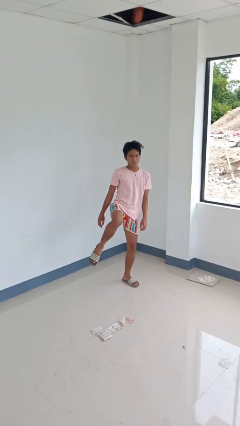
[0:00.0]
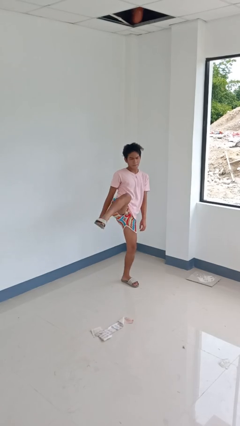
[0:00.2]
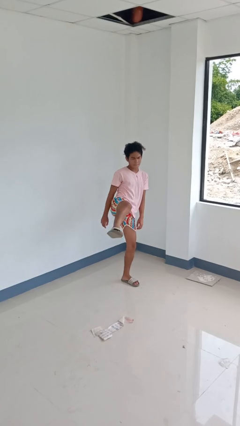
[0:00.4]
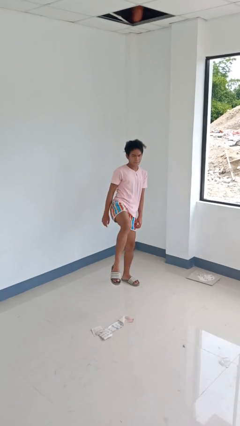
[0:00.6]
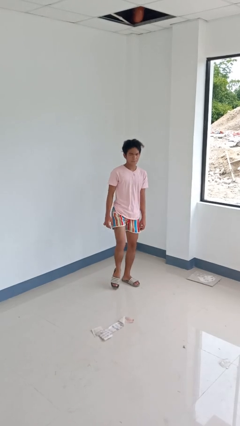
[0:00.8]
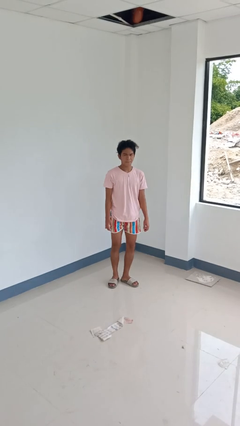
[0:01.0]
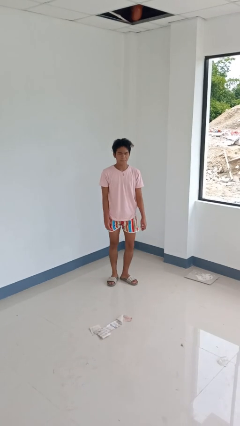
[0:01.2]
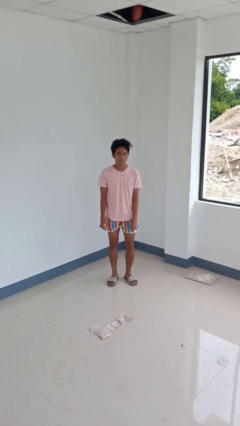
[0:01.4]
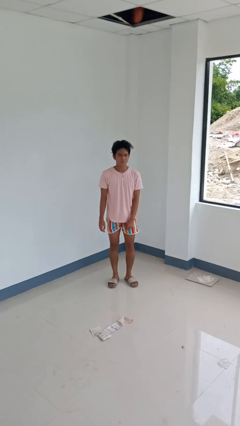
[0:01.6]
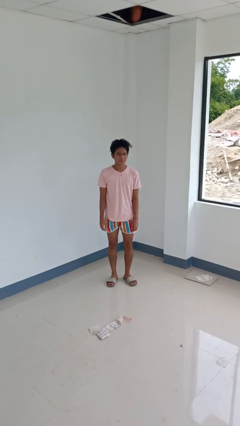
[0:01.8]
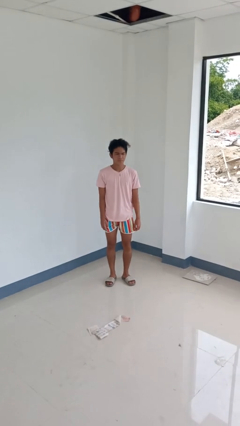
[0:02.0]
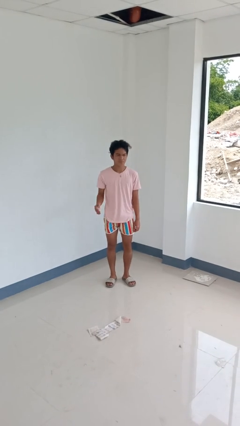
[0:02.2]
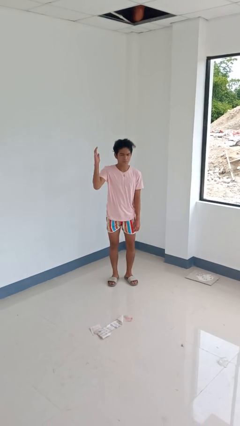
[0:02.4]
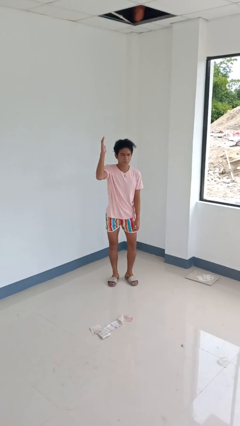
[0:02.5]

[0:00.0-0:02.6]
person karate kicks

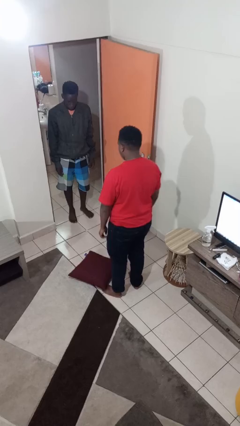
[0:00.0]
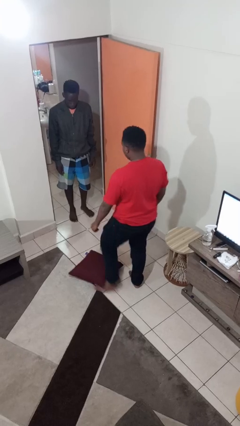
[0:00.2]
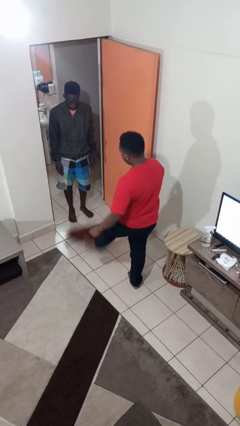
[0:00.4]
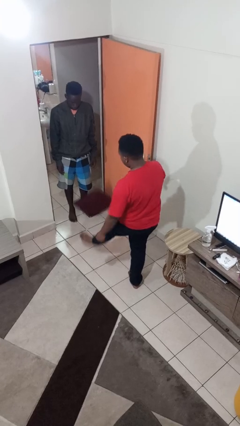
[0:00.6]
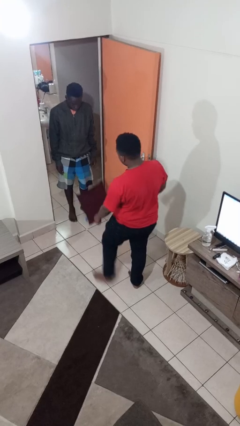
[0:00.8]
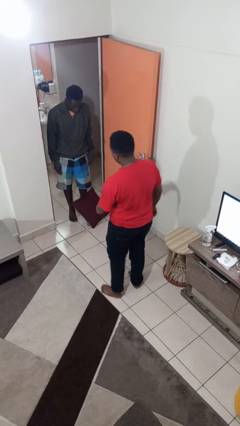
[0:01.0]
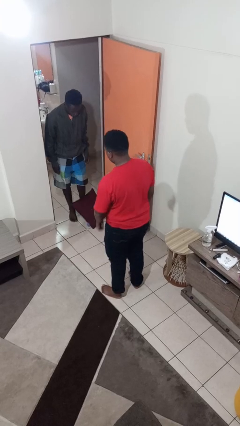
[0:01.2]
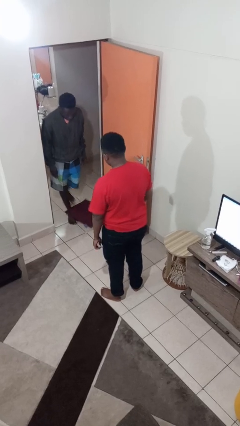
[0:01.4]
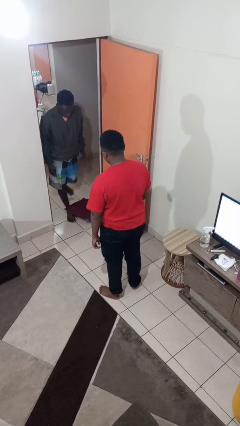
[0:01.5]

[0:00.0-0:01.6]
person kicks object to person

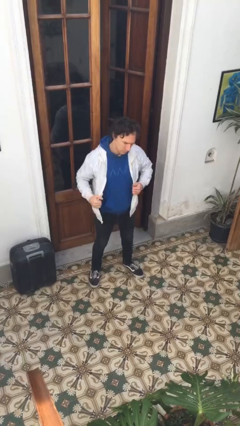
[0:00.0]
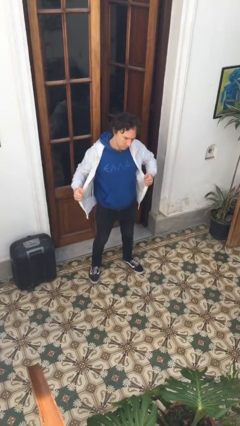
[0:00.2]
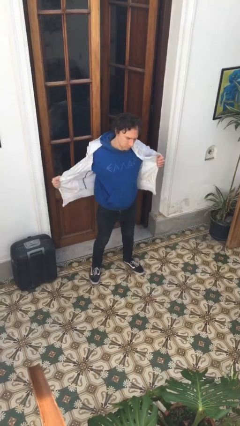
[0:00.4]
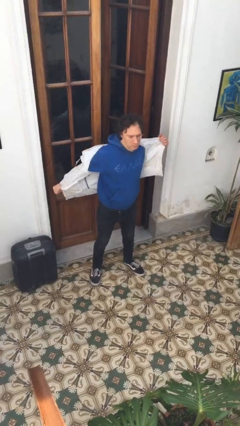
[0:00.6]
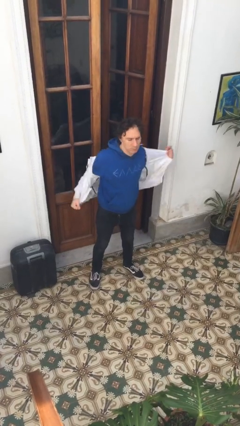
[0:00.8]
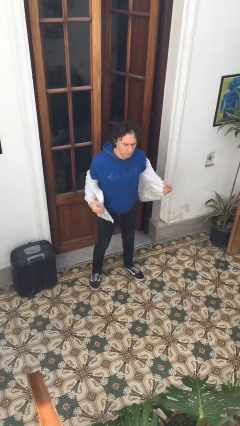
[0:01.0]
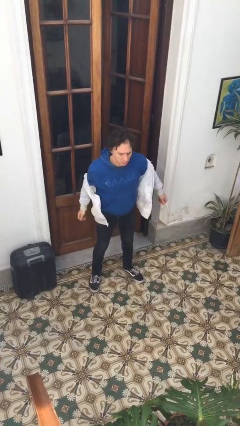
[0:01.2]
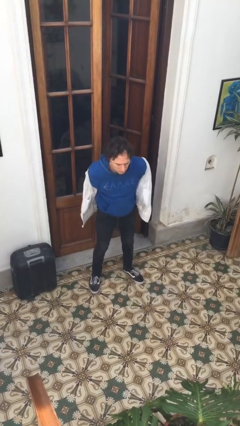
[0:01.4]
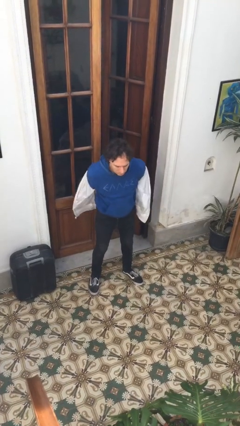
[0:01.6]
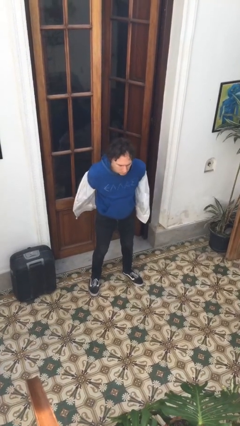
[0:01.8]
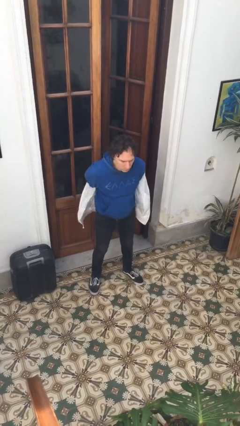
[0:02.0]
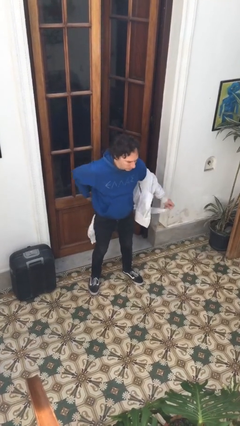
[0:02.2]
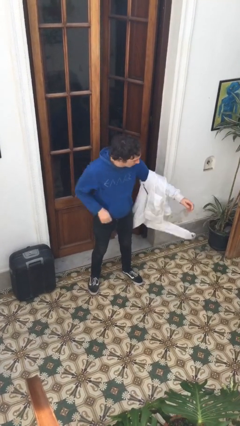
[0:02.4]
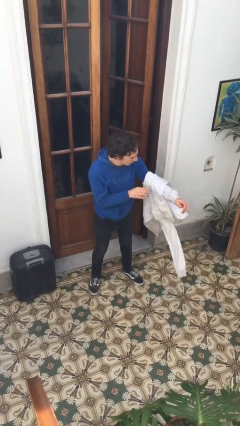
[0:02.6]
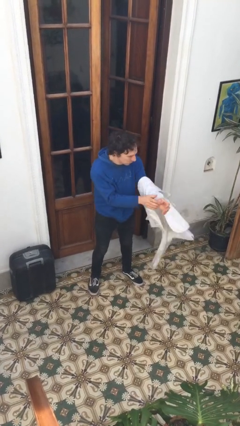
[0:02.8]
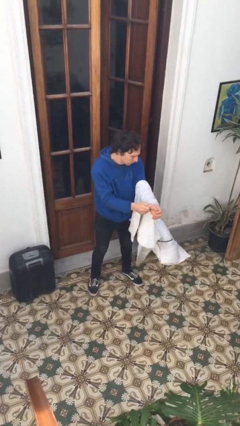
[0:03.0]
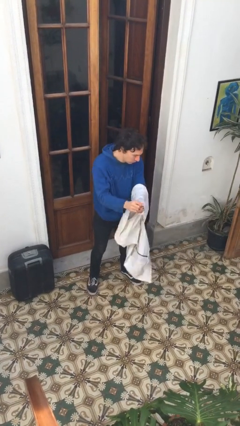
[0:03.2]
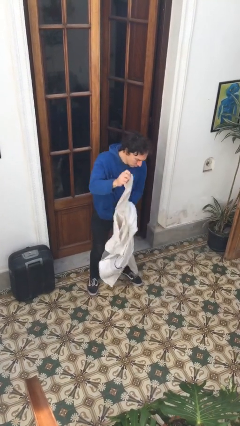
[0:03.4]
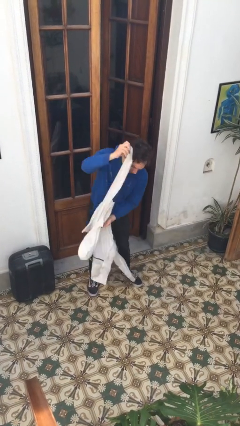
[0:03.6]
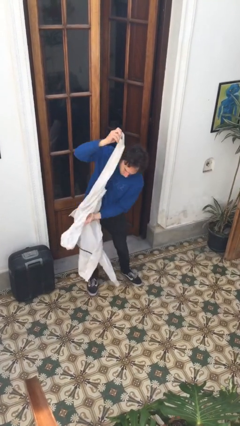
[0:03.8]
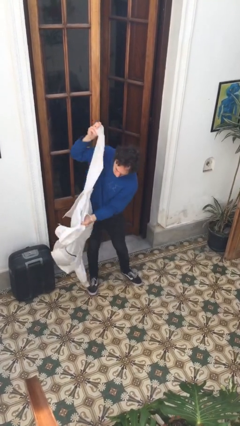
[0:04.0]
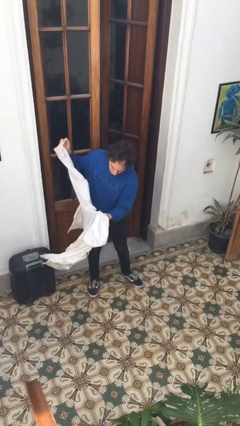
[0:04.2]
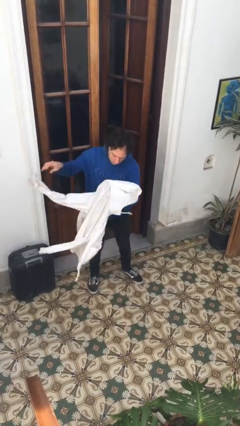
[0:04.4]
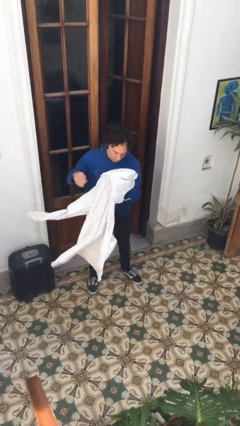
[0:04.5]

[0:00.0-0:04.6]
person takes off jacket

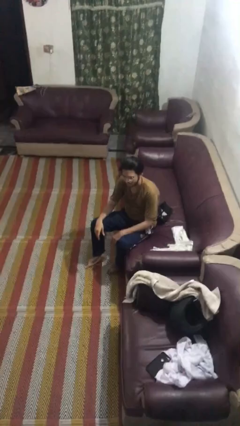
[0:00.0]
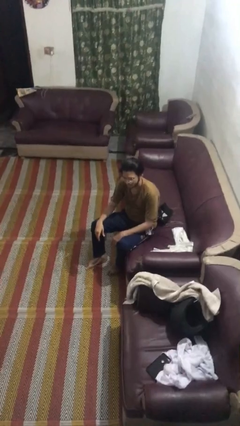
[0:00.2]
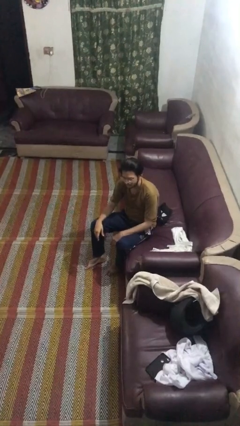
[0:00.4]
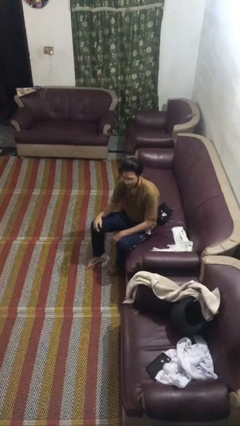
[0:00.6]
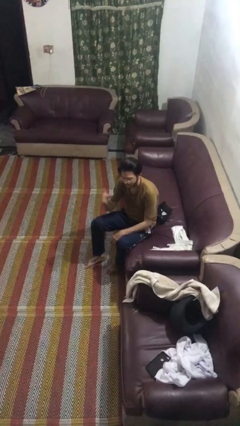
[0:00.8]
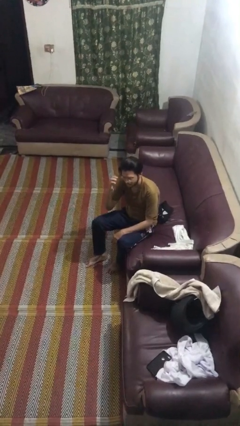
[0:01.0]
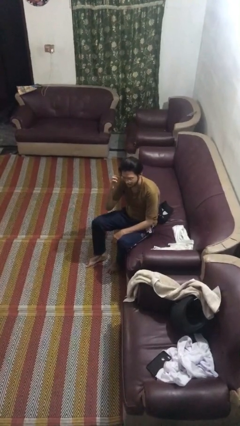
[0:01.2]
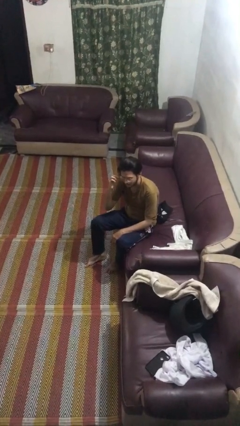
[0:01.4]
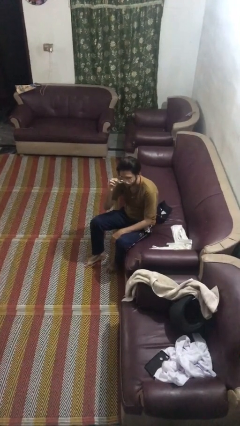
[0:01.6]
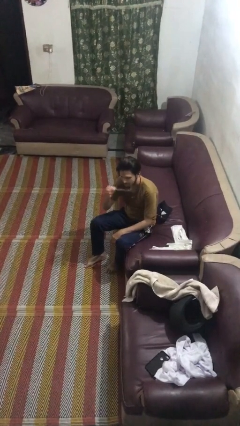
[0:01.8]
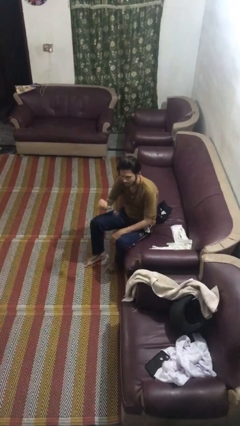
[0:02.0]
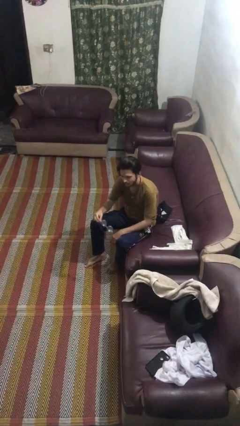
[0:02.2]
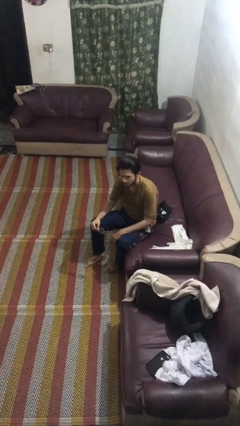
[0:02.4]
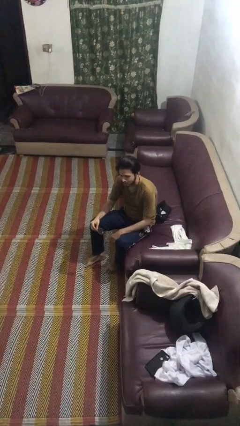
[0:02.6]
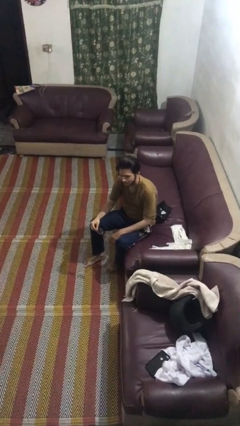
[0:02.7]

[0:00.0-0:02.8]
person takes off glasses

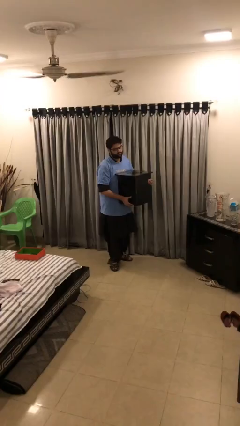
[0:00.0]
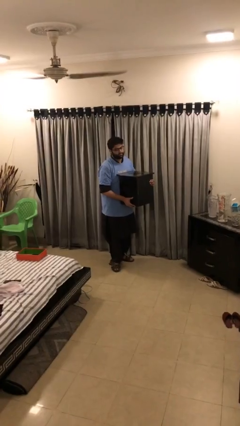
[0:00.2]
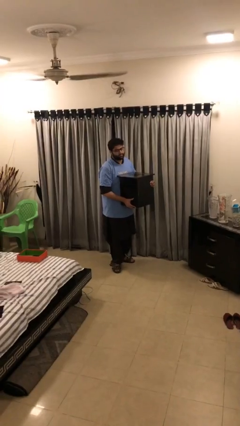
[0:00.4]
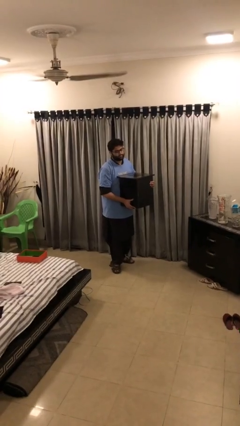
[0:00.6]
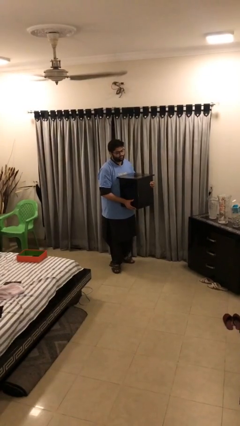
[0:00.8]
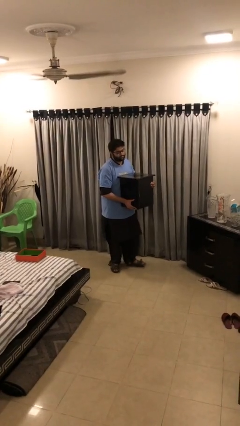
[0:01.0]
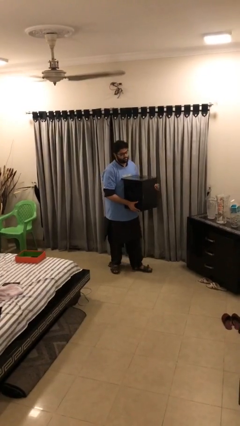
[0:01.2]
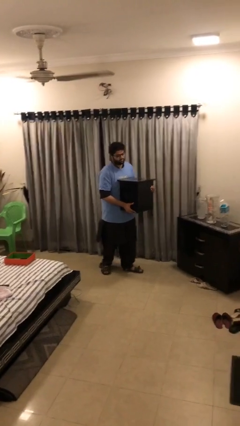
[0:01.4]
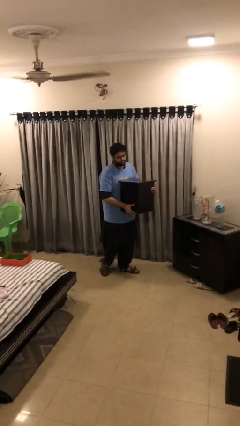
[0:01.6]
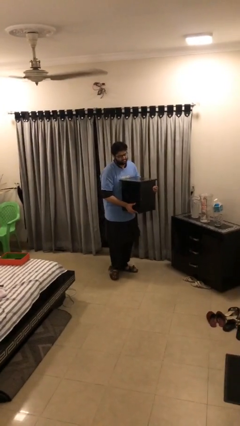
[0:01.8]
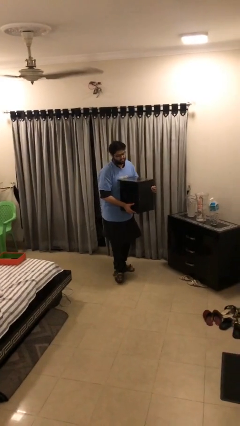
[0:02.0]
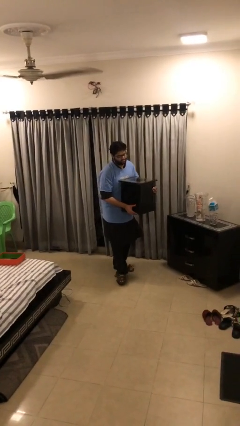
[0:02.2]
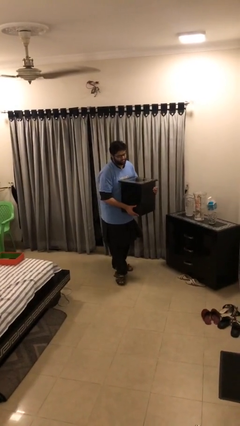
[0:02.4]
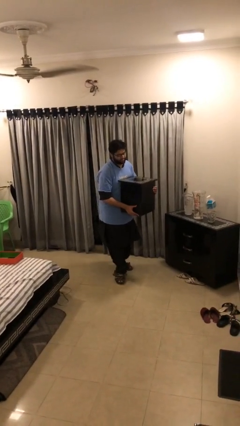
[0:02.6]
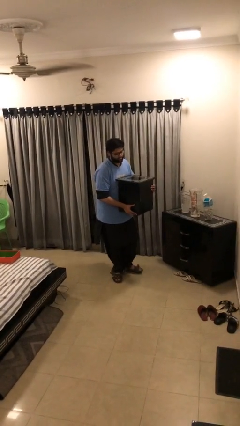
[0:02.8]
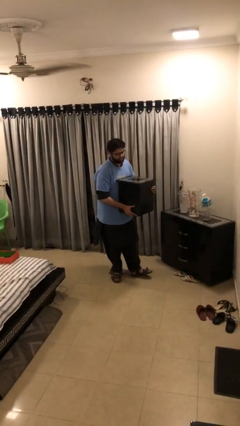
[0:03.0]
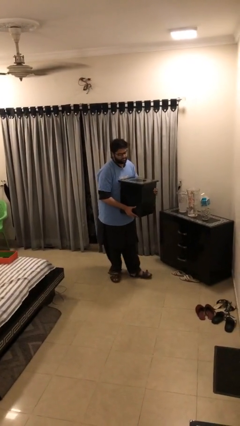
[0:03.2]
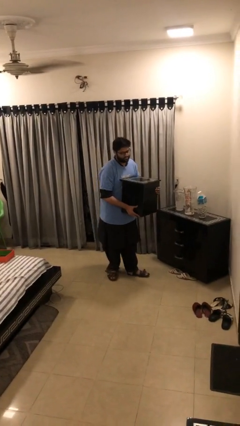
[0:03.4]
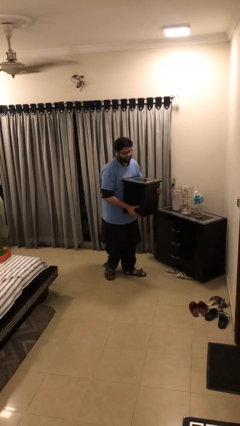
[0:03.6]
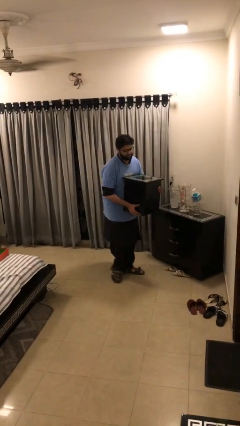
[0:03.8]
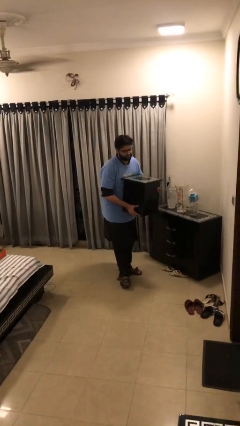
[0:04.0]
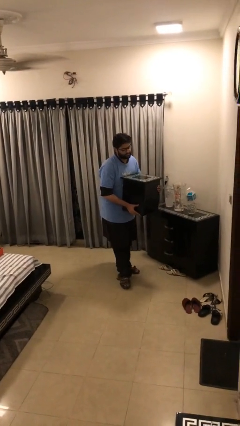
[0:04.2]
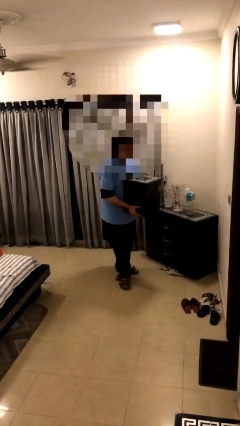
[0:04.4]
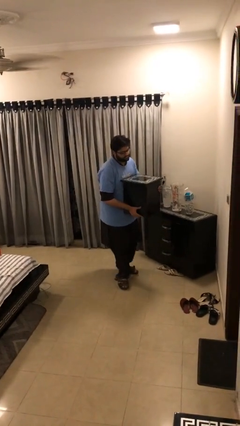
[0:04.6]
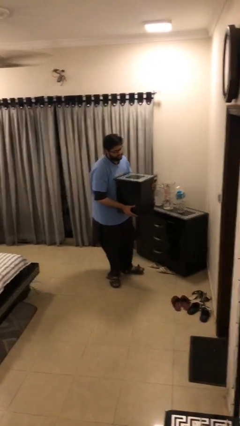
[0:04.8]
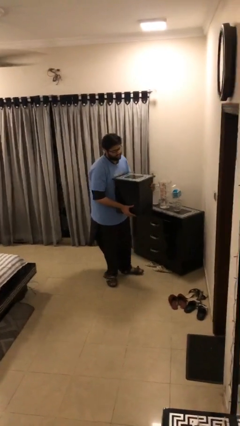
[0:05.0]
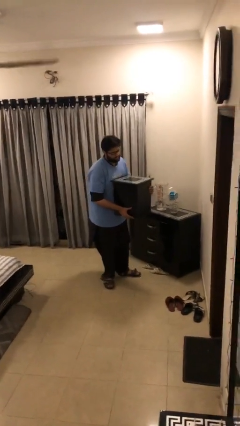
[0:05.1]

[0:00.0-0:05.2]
person carries heavy object

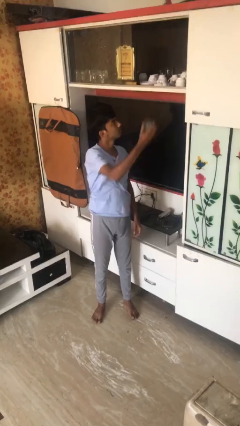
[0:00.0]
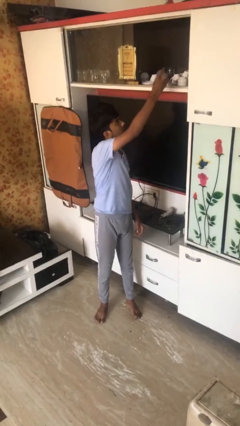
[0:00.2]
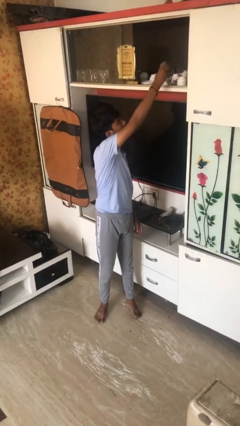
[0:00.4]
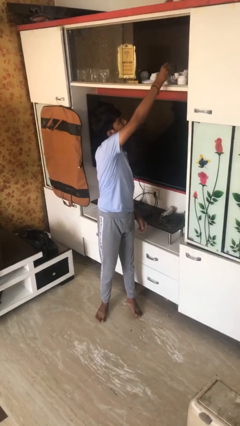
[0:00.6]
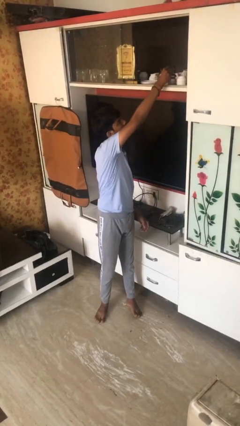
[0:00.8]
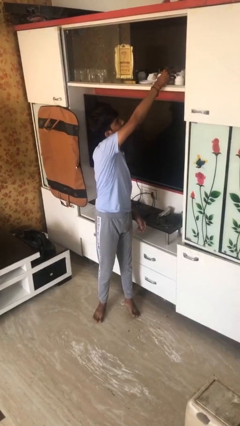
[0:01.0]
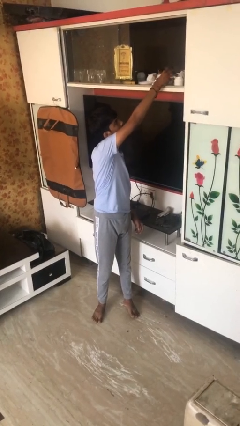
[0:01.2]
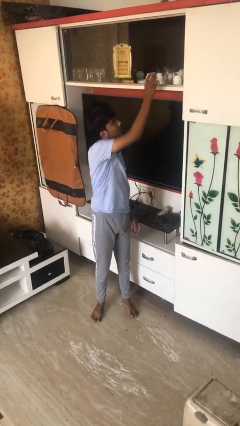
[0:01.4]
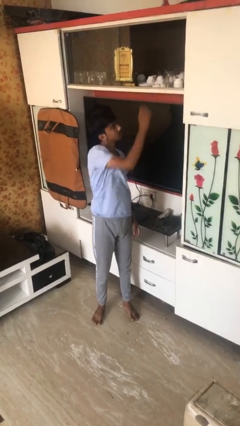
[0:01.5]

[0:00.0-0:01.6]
person puts object in cabinet
